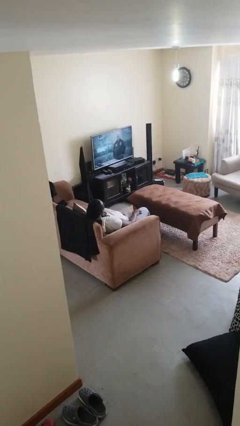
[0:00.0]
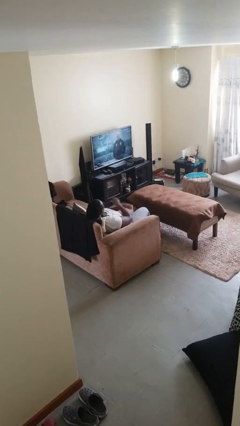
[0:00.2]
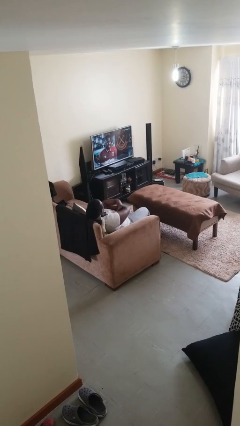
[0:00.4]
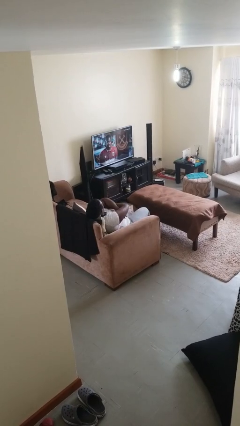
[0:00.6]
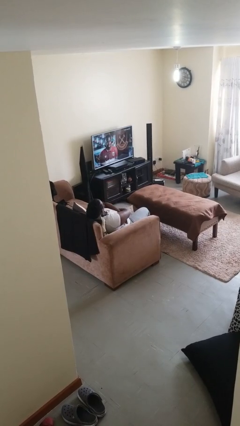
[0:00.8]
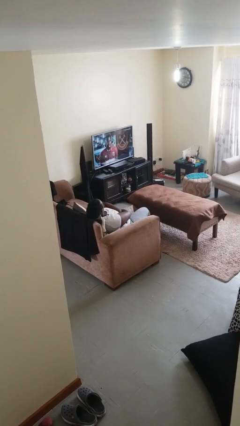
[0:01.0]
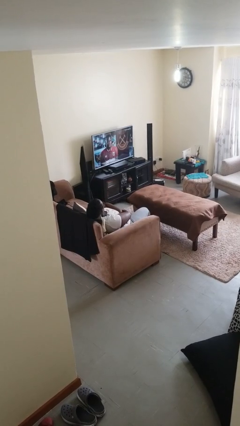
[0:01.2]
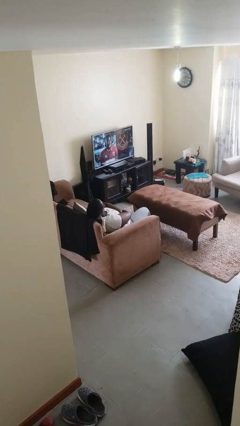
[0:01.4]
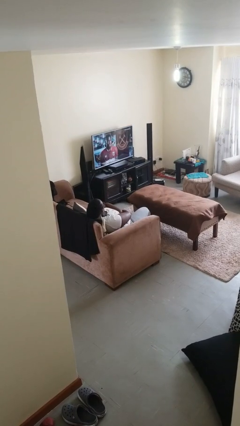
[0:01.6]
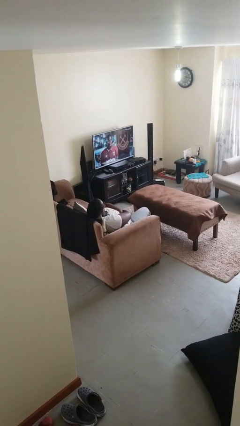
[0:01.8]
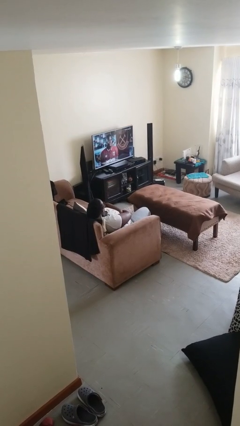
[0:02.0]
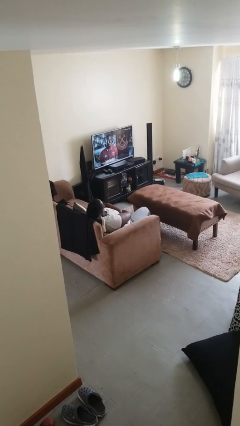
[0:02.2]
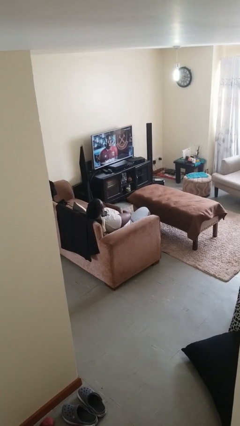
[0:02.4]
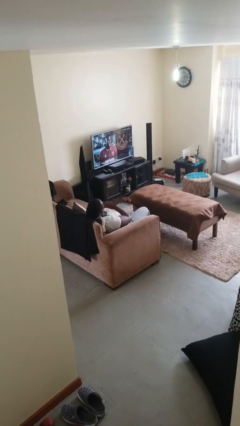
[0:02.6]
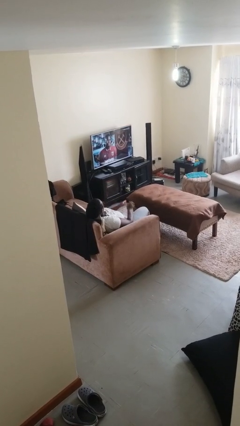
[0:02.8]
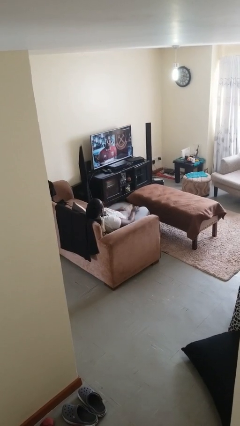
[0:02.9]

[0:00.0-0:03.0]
person crosses arms

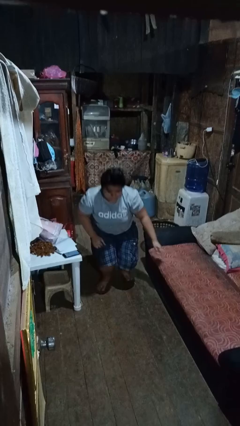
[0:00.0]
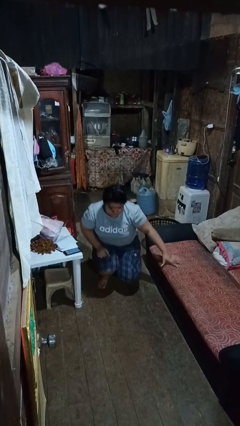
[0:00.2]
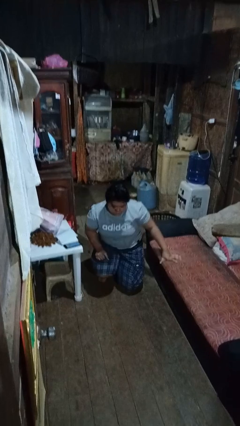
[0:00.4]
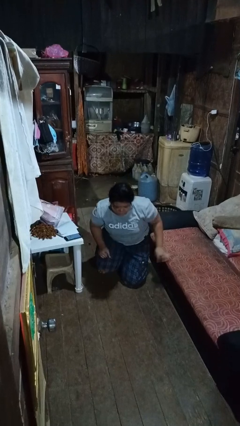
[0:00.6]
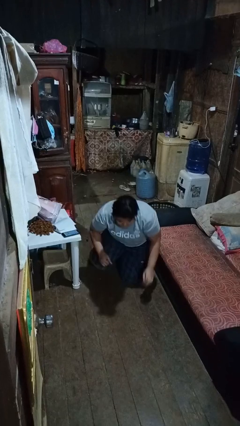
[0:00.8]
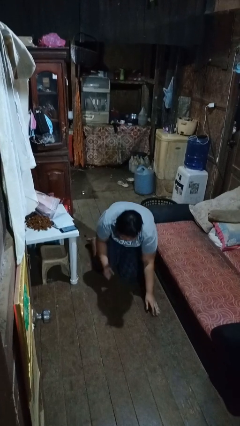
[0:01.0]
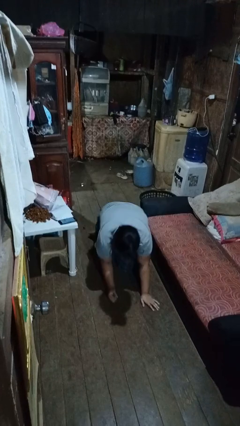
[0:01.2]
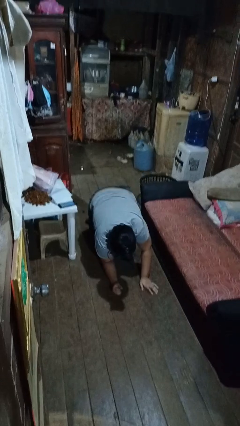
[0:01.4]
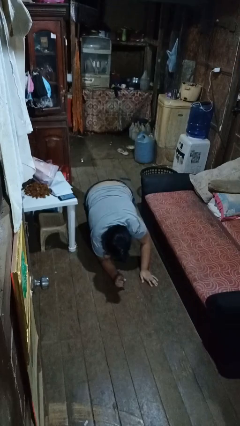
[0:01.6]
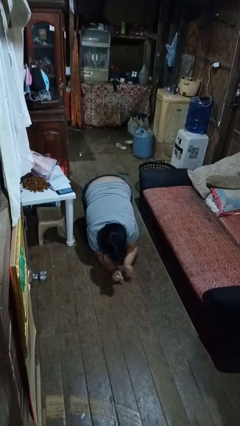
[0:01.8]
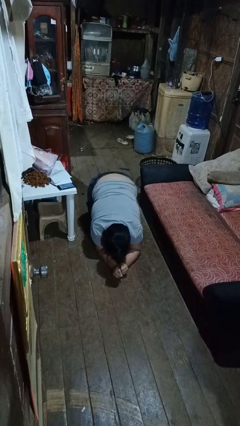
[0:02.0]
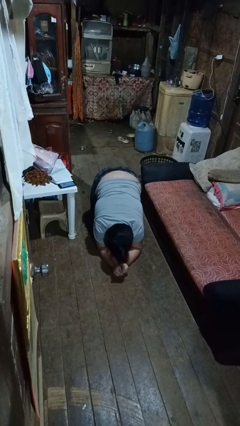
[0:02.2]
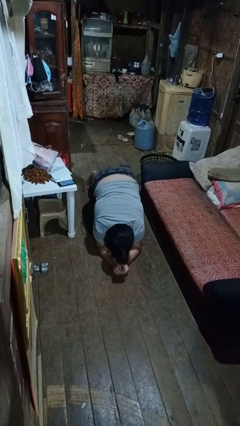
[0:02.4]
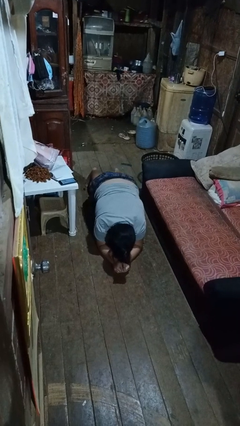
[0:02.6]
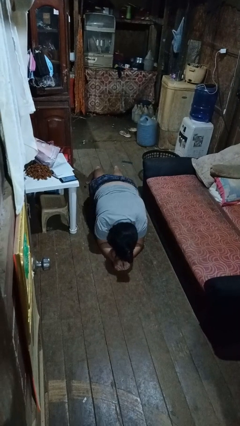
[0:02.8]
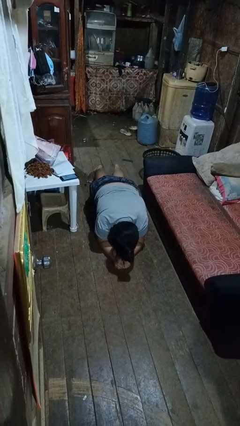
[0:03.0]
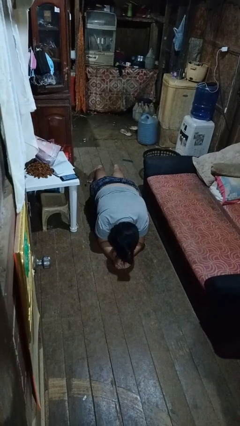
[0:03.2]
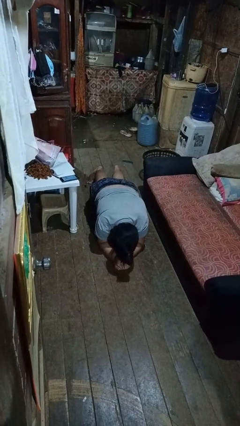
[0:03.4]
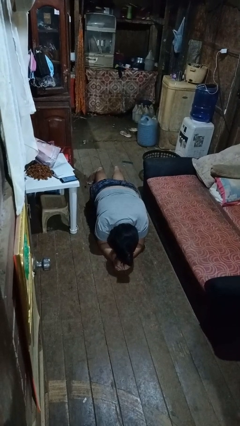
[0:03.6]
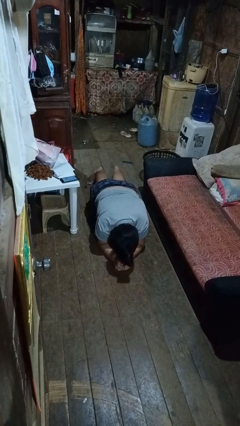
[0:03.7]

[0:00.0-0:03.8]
person exercises with plank

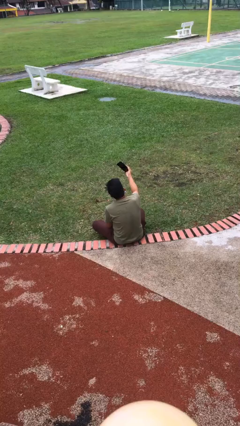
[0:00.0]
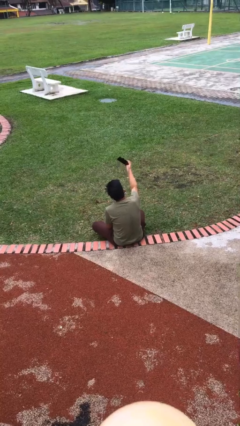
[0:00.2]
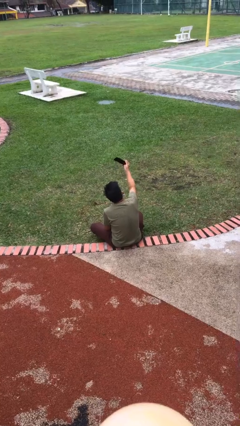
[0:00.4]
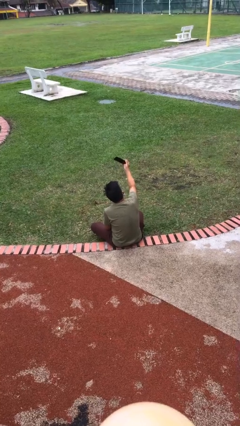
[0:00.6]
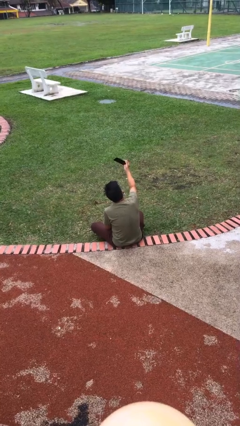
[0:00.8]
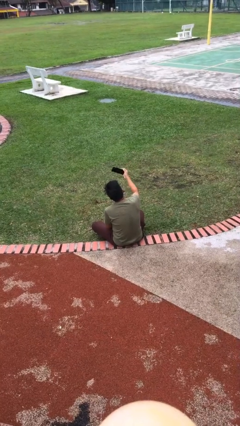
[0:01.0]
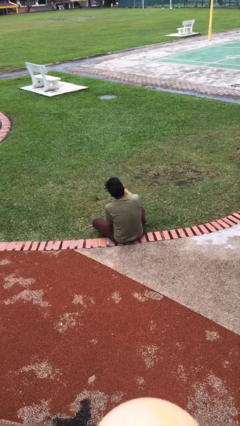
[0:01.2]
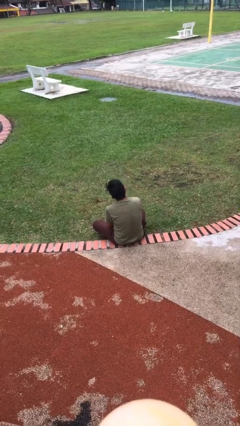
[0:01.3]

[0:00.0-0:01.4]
person takes selfie

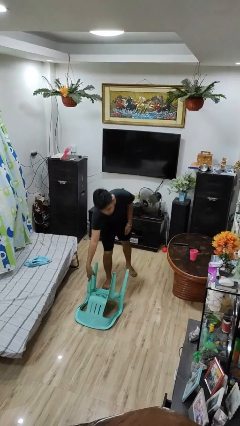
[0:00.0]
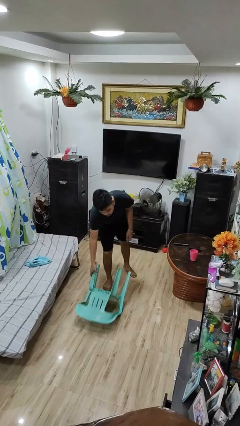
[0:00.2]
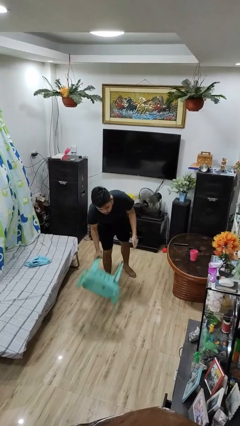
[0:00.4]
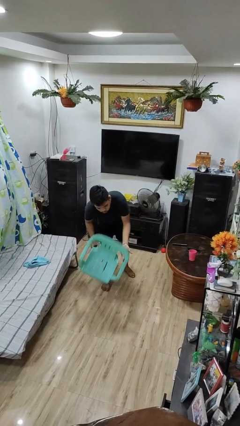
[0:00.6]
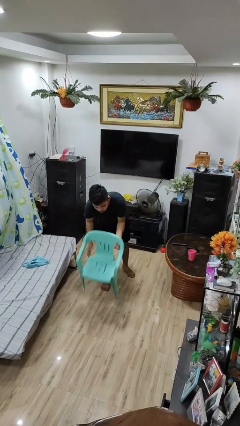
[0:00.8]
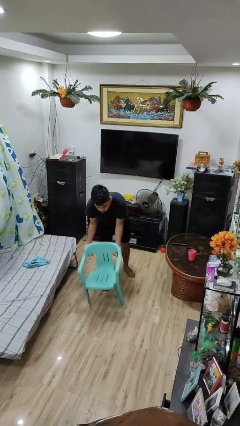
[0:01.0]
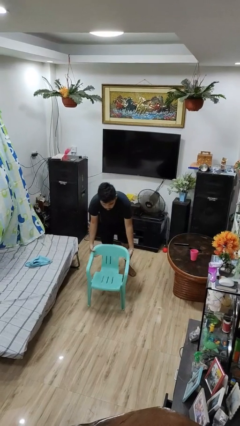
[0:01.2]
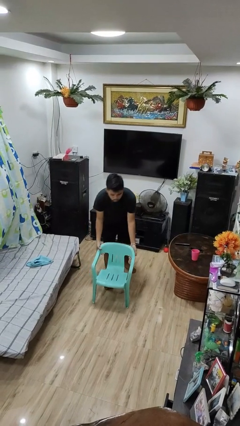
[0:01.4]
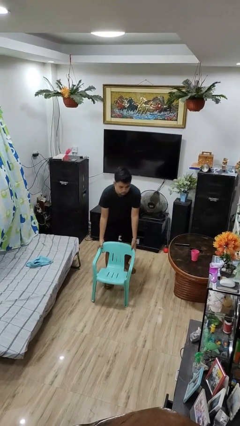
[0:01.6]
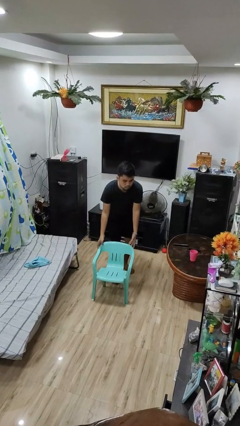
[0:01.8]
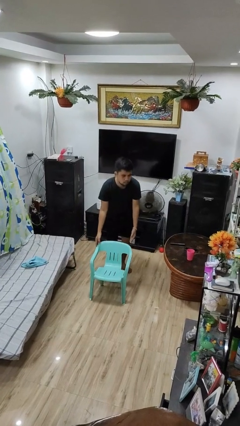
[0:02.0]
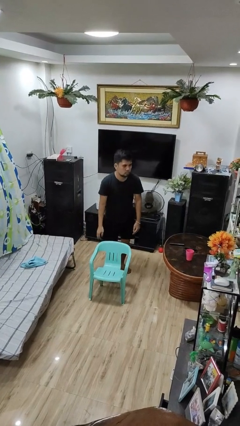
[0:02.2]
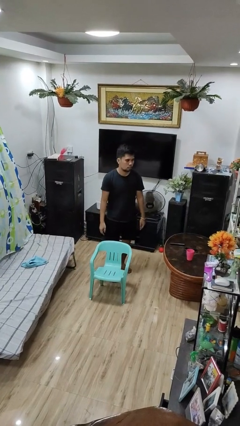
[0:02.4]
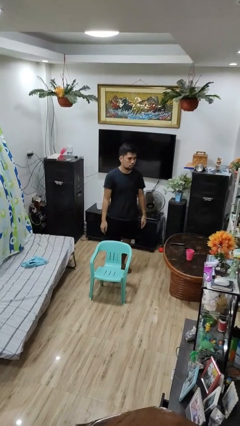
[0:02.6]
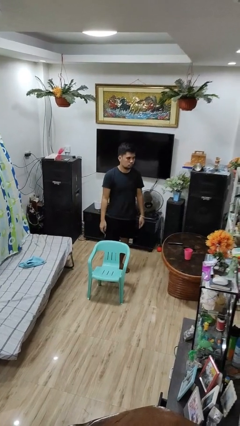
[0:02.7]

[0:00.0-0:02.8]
person sets upright furniture

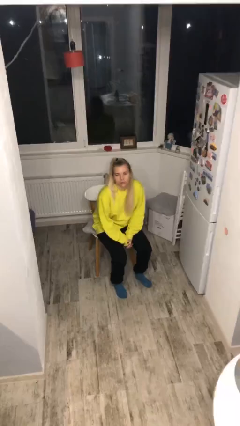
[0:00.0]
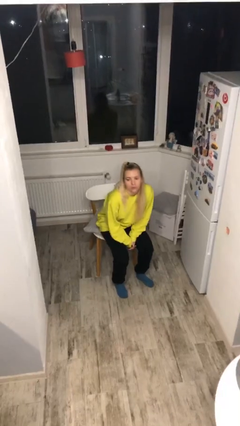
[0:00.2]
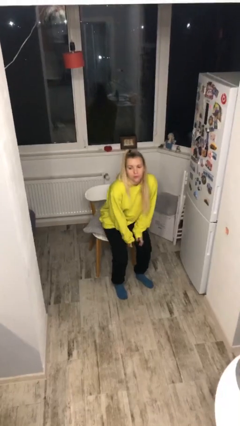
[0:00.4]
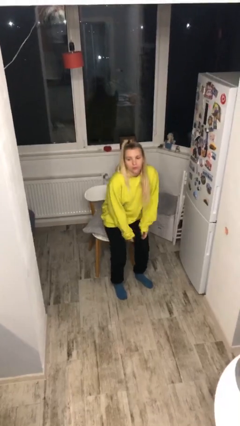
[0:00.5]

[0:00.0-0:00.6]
person stands up

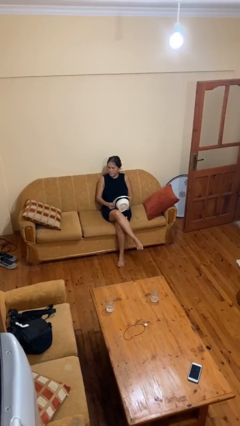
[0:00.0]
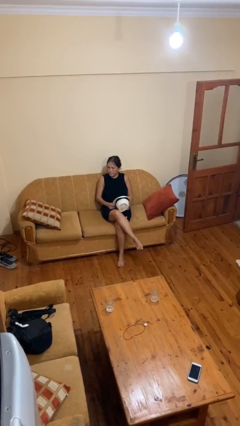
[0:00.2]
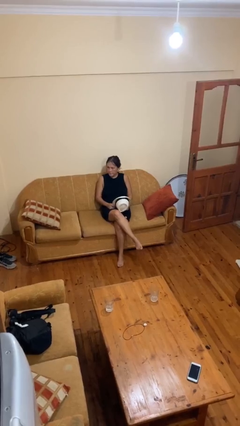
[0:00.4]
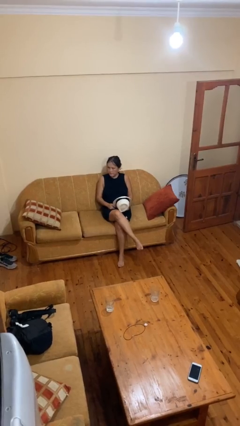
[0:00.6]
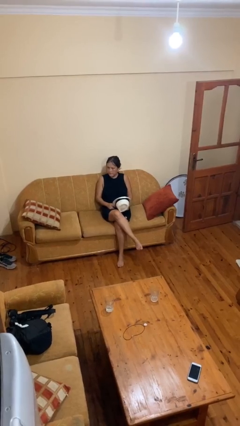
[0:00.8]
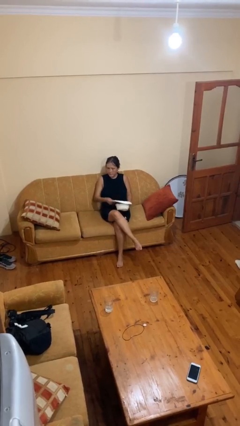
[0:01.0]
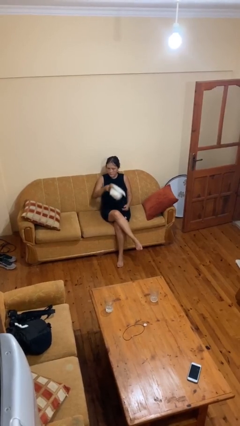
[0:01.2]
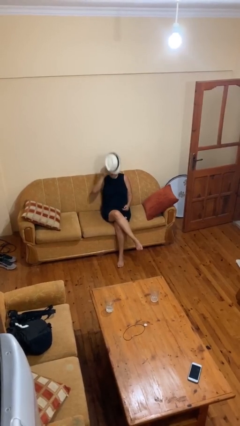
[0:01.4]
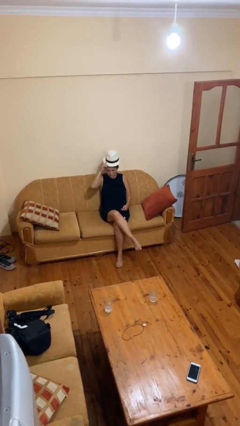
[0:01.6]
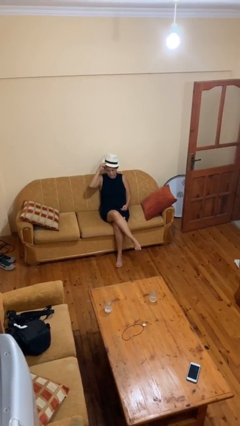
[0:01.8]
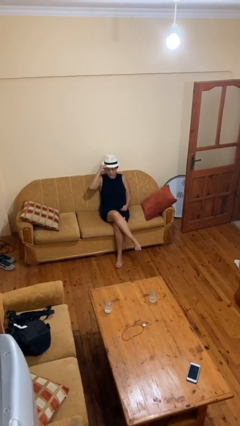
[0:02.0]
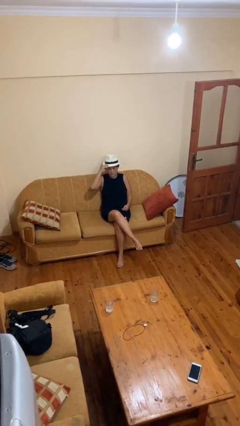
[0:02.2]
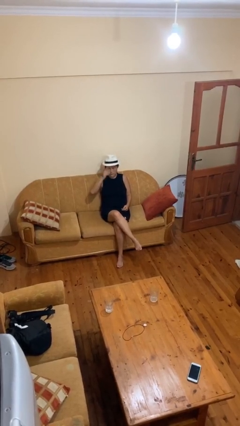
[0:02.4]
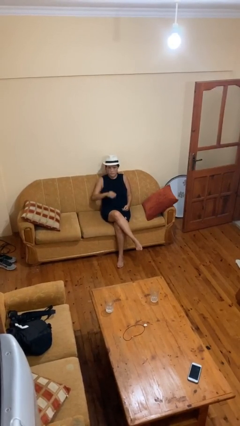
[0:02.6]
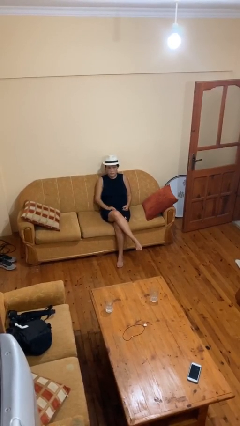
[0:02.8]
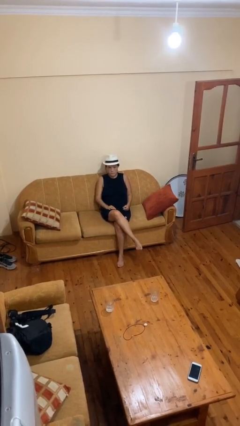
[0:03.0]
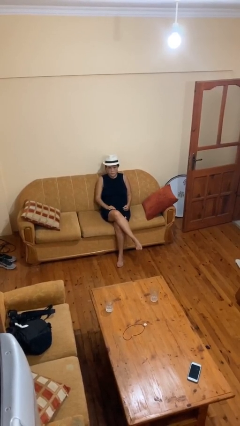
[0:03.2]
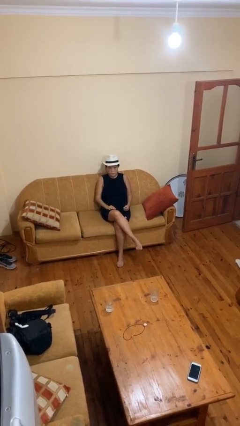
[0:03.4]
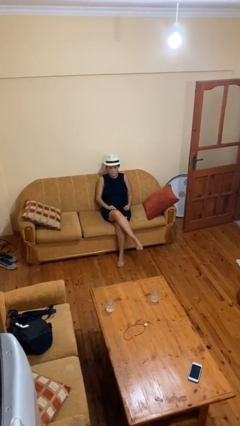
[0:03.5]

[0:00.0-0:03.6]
person puts on hat

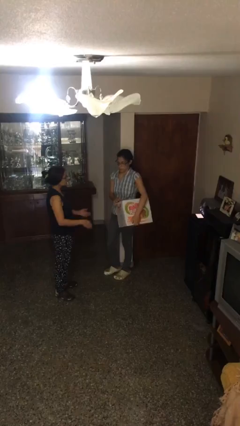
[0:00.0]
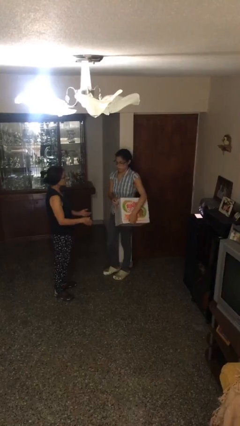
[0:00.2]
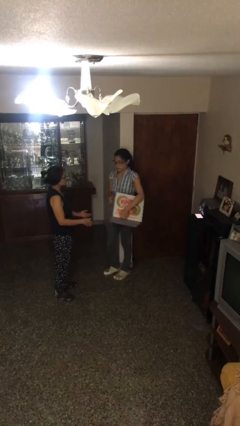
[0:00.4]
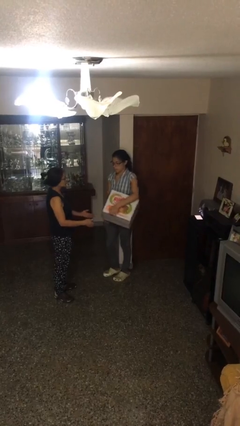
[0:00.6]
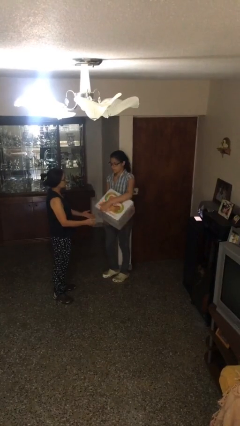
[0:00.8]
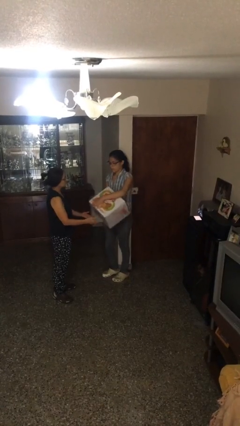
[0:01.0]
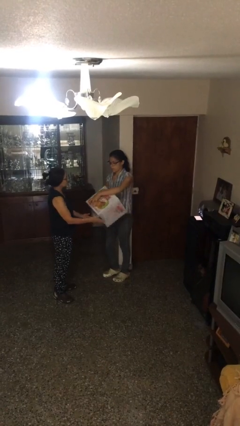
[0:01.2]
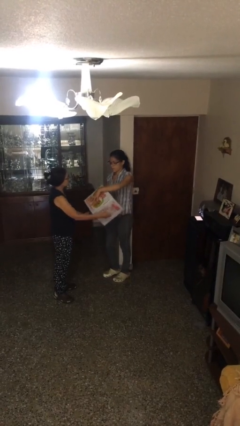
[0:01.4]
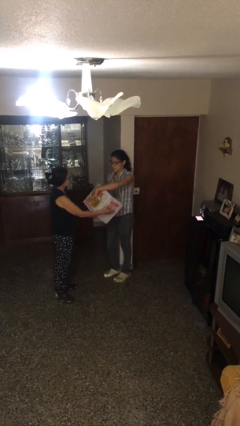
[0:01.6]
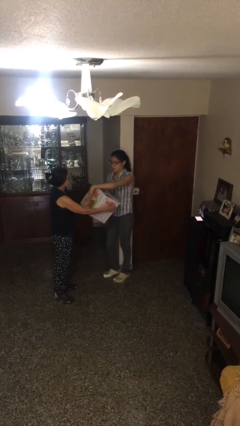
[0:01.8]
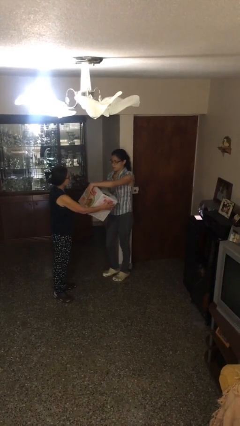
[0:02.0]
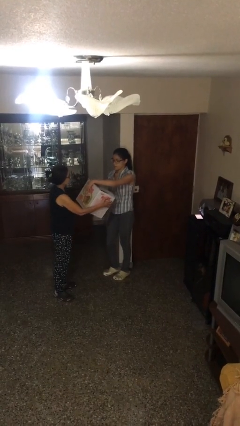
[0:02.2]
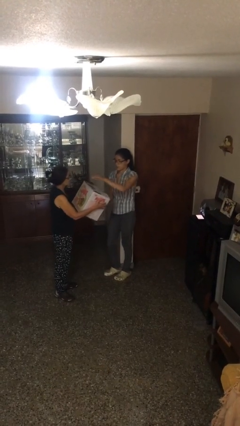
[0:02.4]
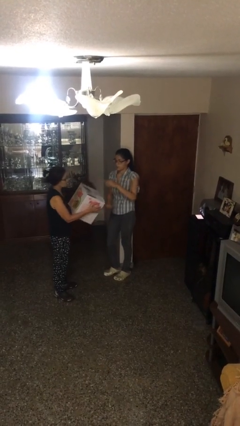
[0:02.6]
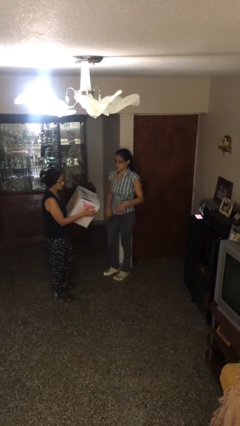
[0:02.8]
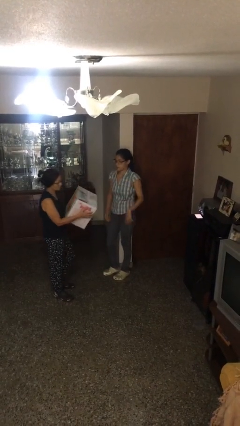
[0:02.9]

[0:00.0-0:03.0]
person transfers object to person
